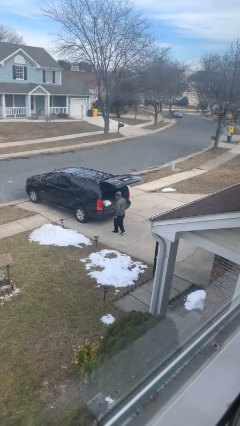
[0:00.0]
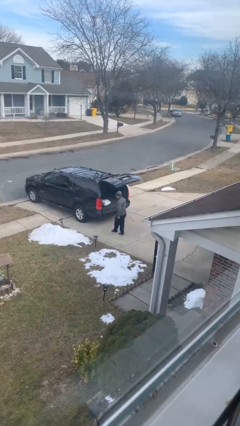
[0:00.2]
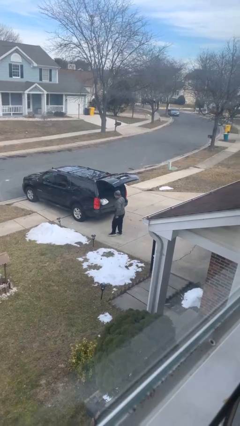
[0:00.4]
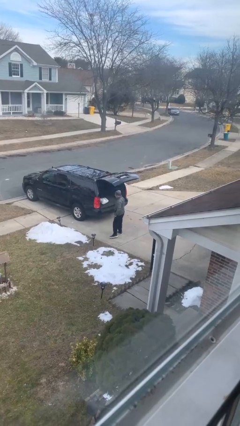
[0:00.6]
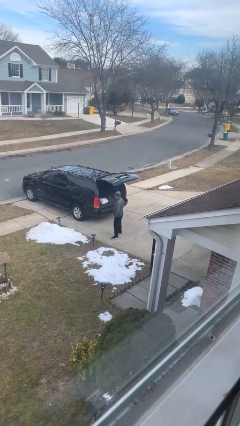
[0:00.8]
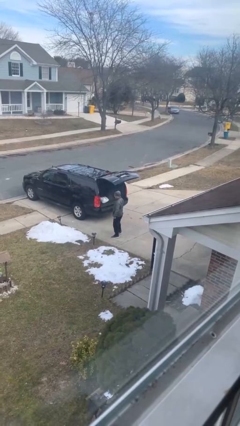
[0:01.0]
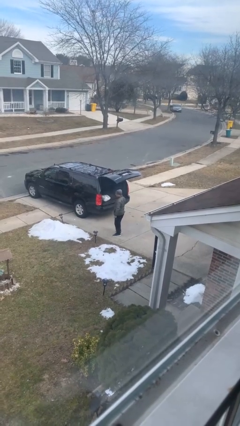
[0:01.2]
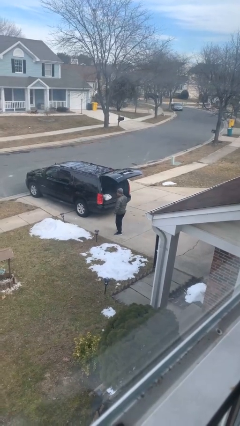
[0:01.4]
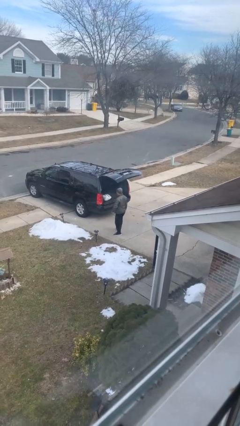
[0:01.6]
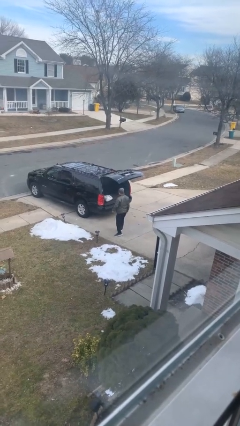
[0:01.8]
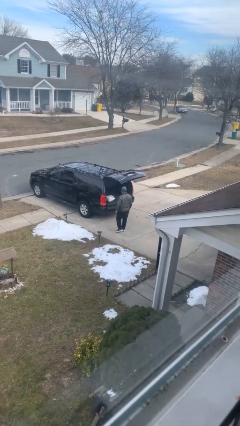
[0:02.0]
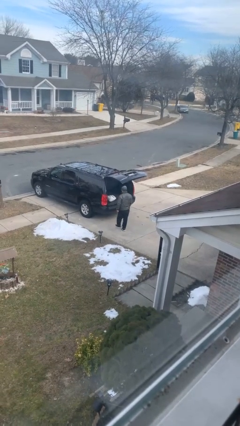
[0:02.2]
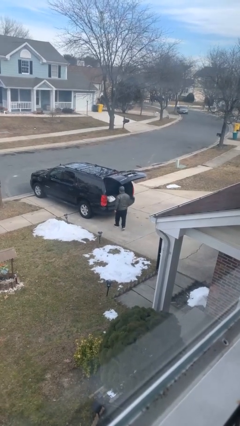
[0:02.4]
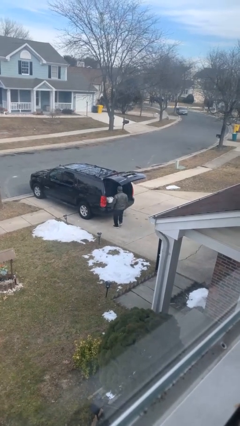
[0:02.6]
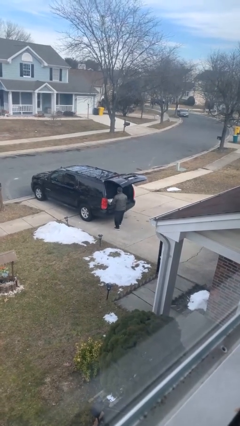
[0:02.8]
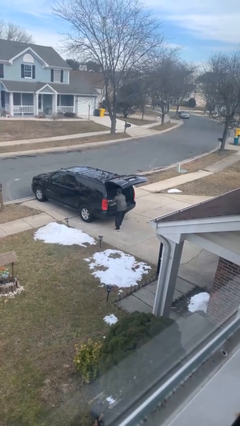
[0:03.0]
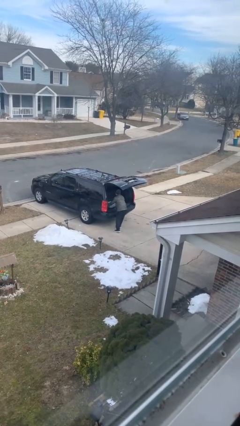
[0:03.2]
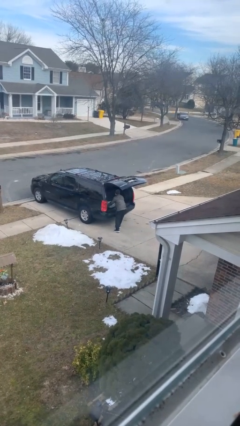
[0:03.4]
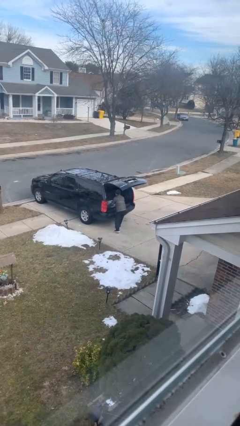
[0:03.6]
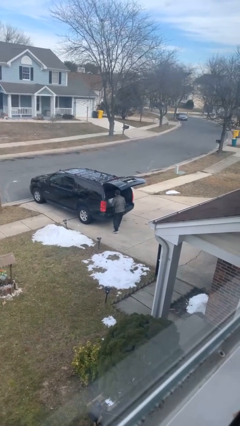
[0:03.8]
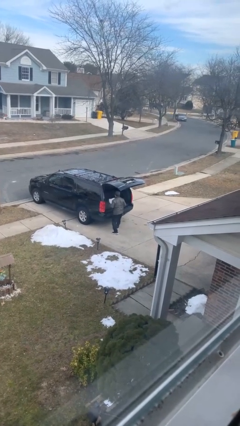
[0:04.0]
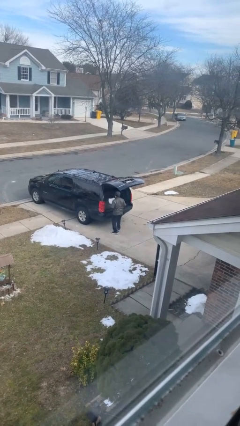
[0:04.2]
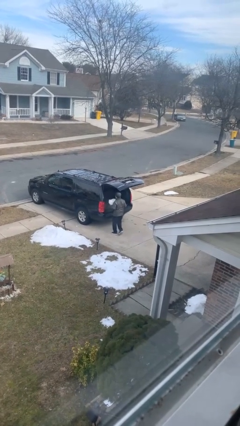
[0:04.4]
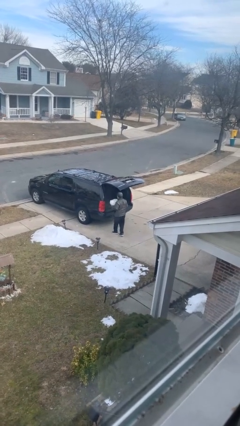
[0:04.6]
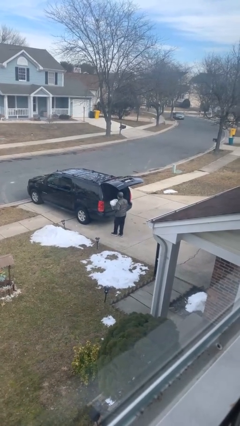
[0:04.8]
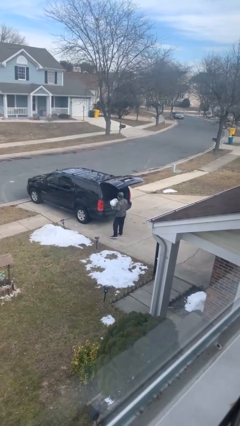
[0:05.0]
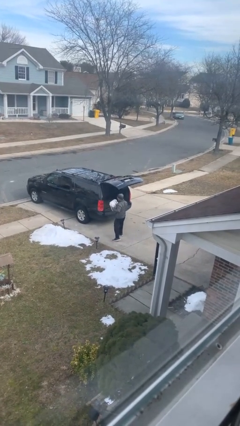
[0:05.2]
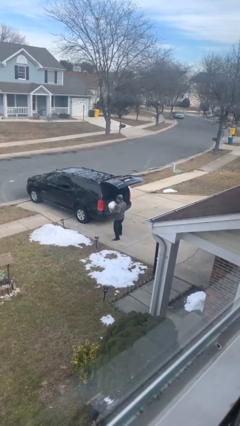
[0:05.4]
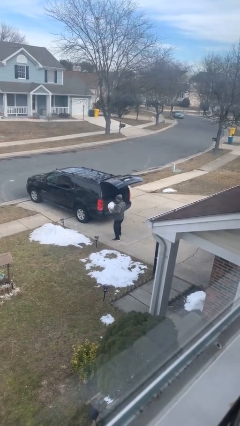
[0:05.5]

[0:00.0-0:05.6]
person unloads car

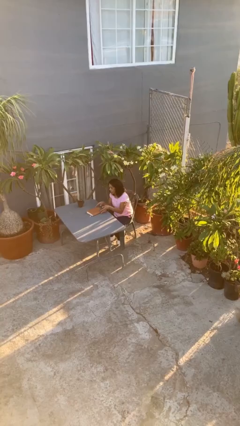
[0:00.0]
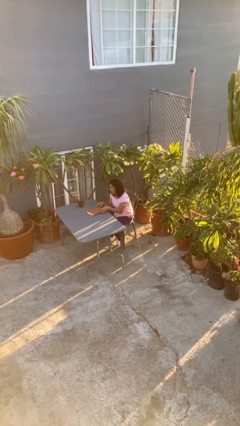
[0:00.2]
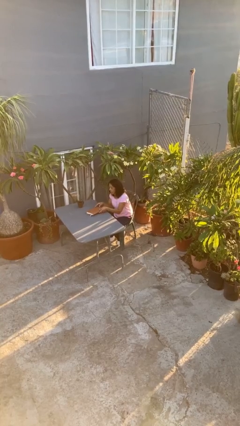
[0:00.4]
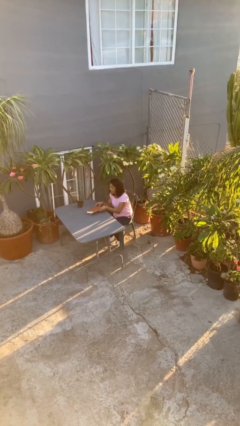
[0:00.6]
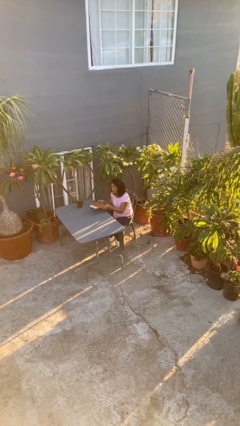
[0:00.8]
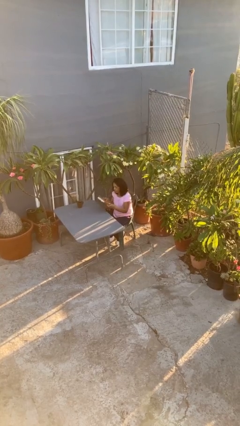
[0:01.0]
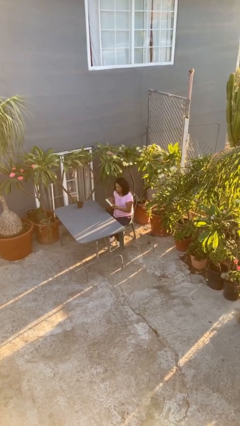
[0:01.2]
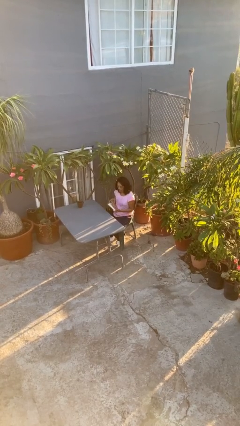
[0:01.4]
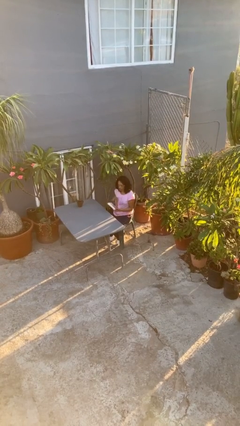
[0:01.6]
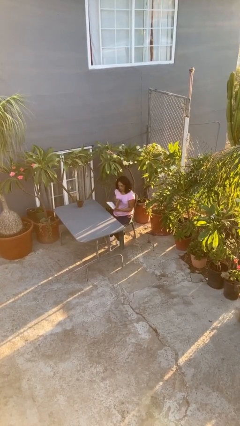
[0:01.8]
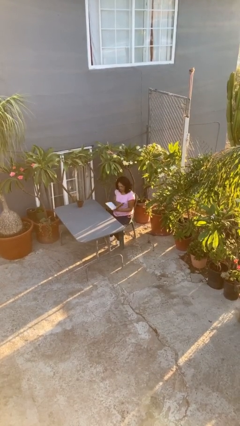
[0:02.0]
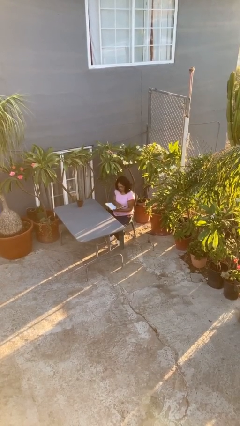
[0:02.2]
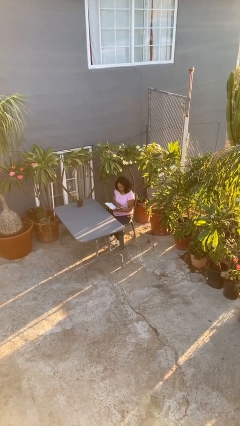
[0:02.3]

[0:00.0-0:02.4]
person picks up object from table

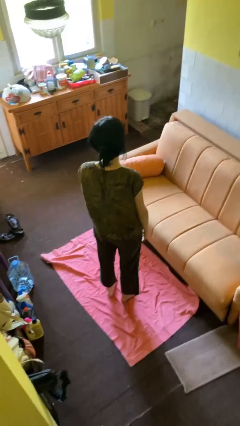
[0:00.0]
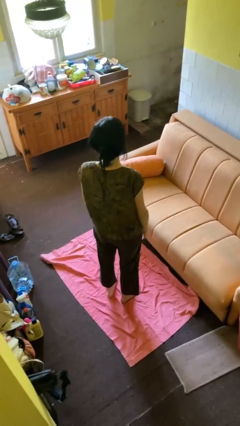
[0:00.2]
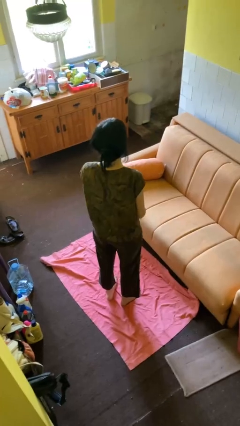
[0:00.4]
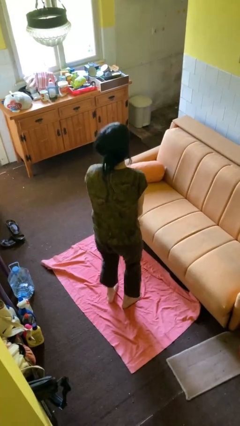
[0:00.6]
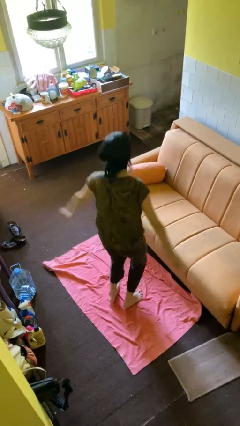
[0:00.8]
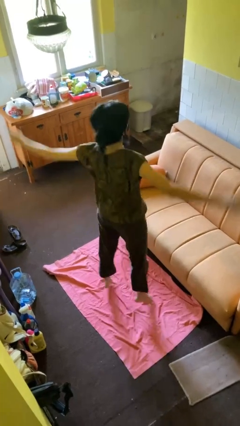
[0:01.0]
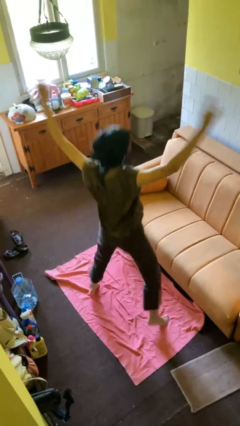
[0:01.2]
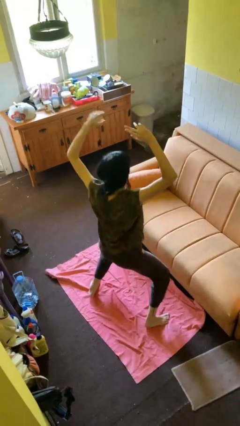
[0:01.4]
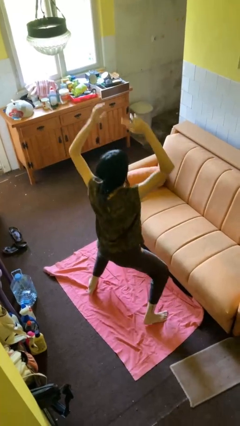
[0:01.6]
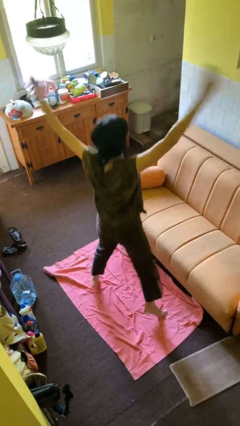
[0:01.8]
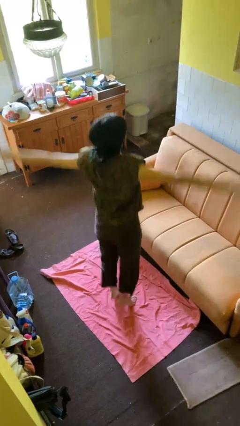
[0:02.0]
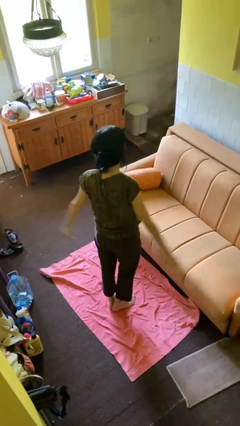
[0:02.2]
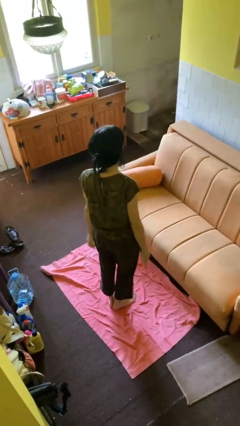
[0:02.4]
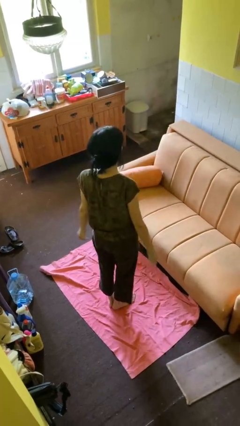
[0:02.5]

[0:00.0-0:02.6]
person exercises with jumping jacks

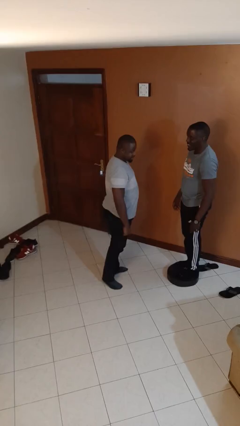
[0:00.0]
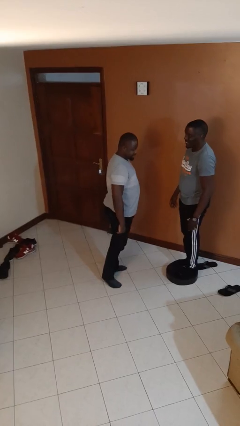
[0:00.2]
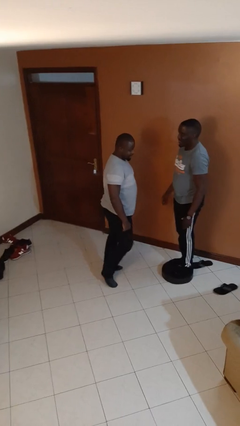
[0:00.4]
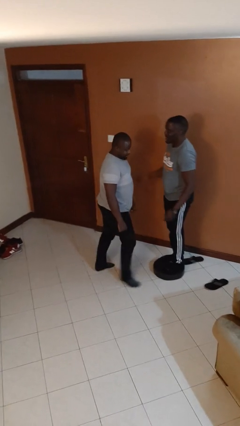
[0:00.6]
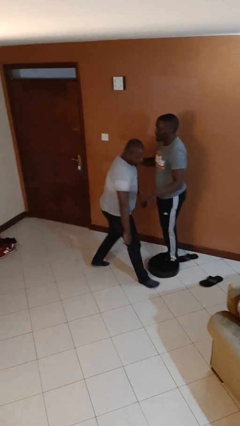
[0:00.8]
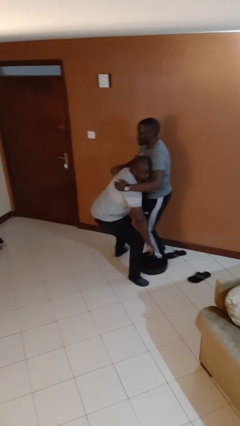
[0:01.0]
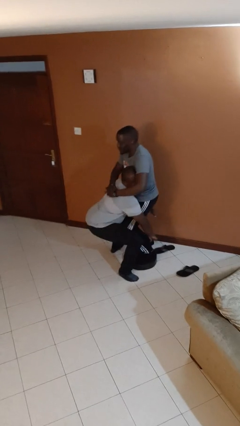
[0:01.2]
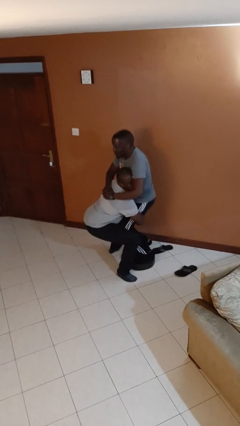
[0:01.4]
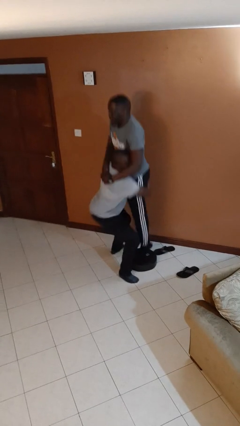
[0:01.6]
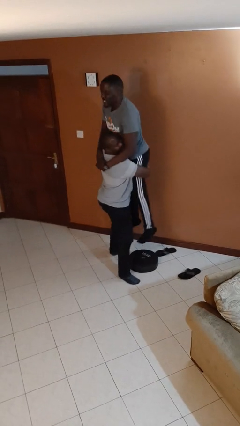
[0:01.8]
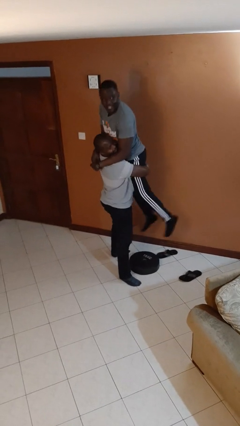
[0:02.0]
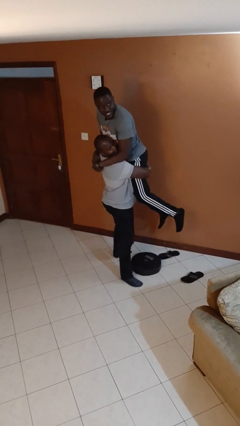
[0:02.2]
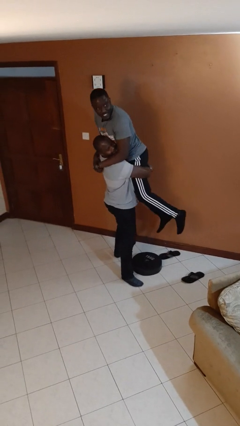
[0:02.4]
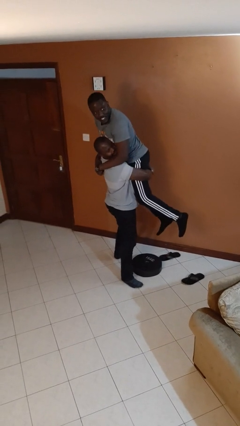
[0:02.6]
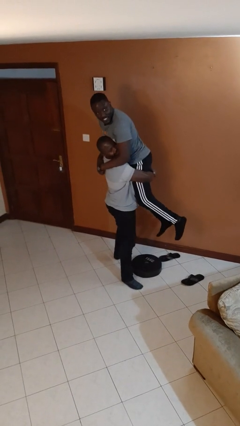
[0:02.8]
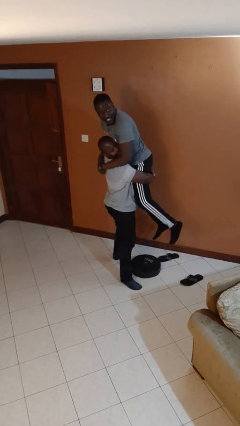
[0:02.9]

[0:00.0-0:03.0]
person picks up person

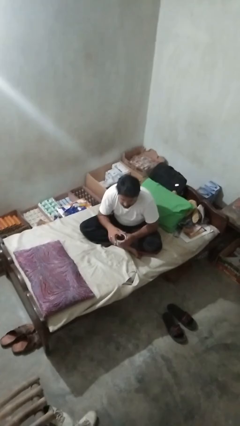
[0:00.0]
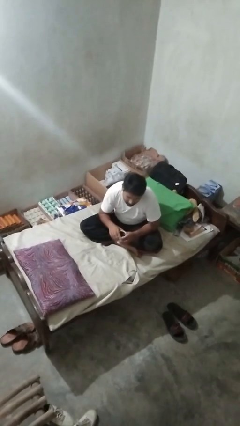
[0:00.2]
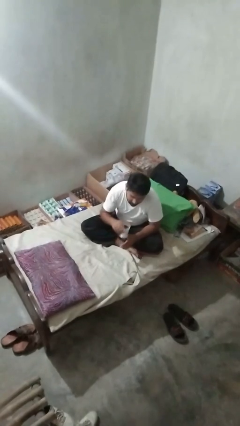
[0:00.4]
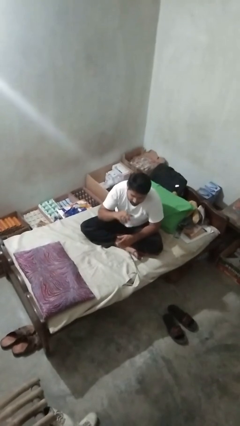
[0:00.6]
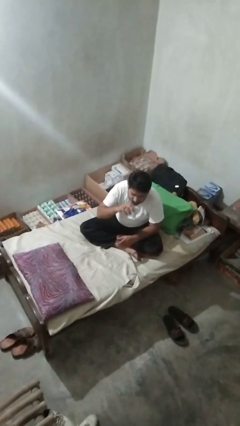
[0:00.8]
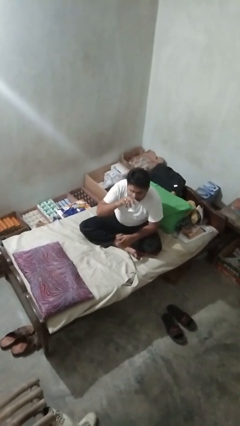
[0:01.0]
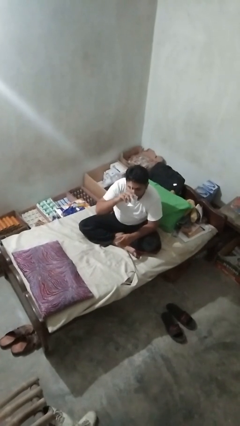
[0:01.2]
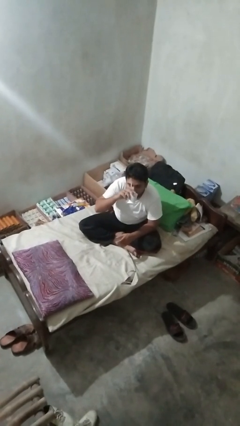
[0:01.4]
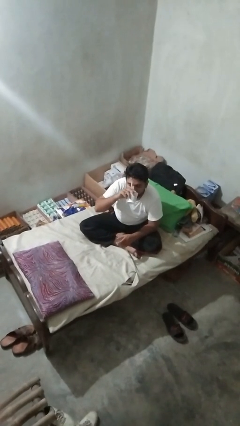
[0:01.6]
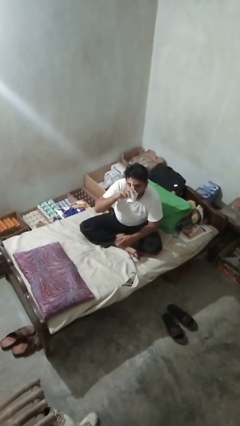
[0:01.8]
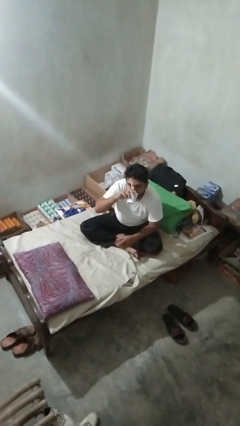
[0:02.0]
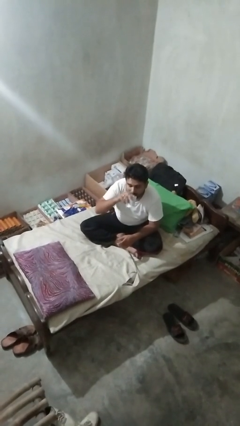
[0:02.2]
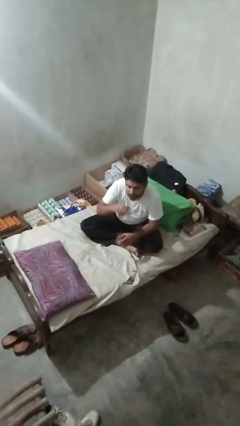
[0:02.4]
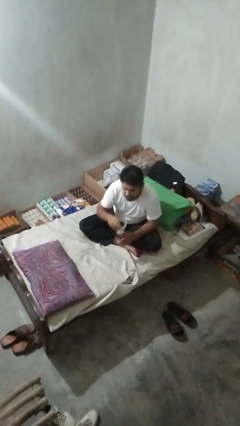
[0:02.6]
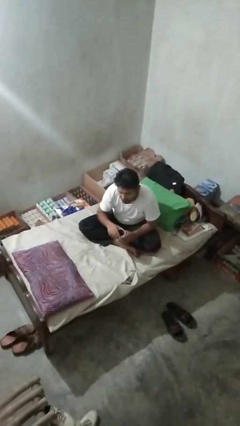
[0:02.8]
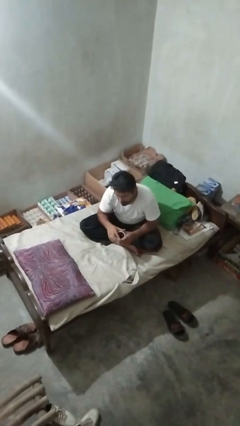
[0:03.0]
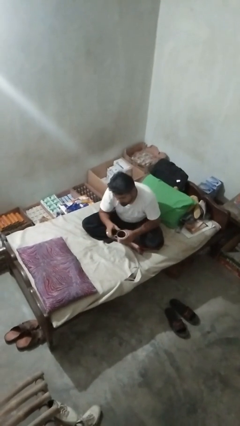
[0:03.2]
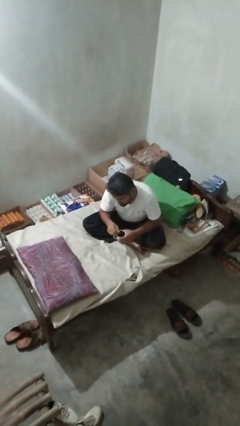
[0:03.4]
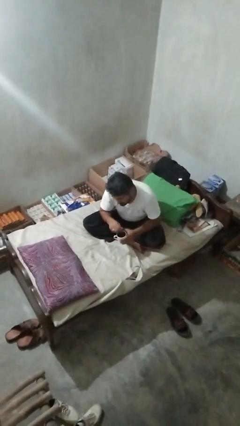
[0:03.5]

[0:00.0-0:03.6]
person drinks from mug

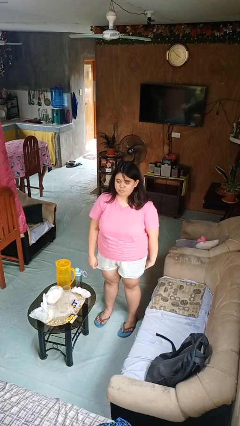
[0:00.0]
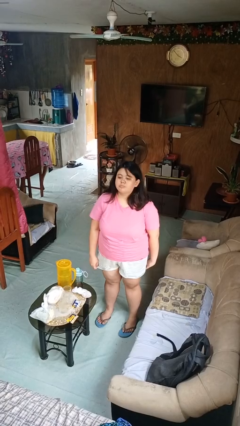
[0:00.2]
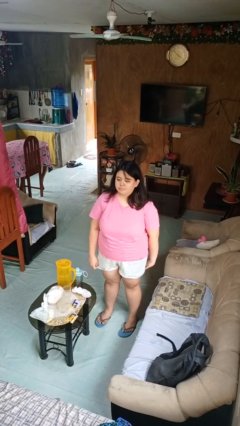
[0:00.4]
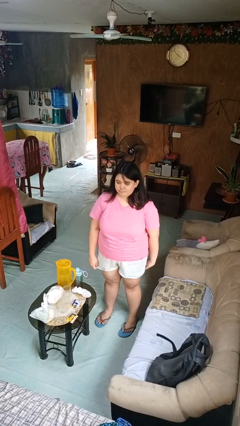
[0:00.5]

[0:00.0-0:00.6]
person nods head
